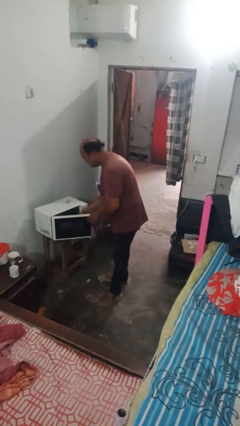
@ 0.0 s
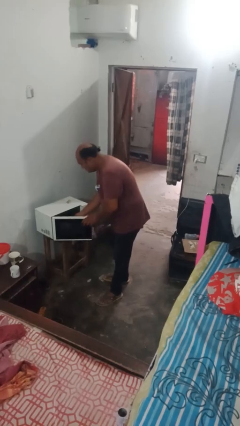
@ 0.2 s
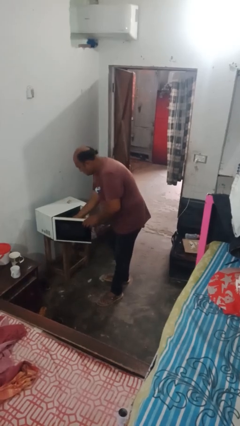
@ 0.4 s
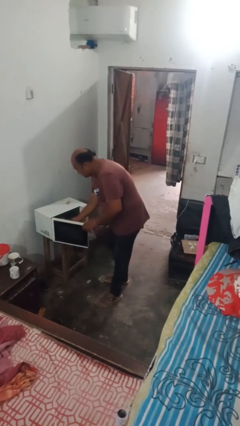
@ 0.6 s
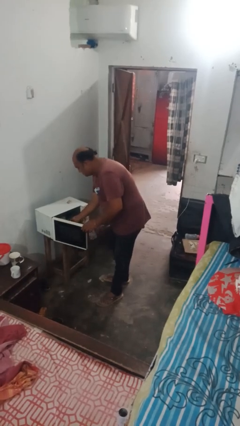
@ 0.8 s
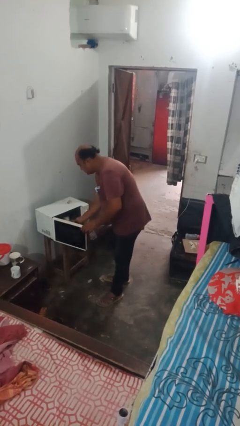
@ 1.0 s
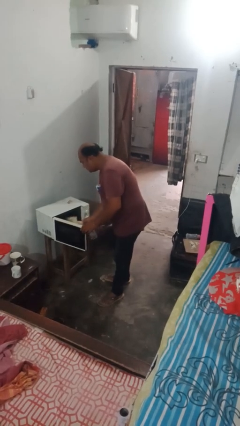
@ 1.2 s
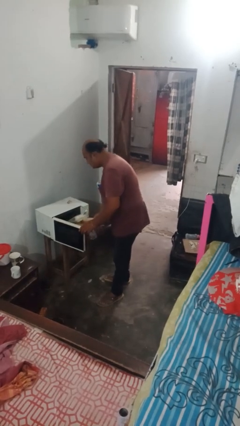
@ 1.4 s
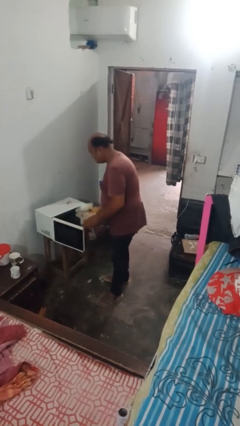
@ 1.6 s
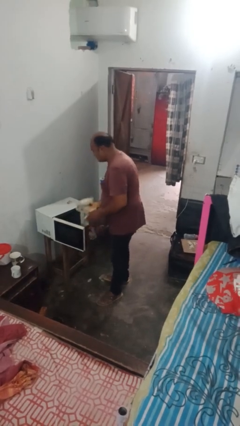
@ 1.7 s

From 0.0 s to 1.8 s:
person takes object from microwave

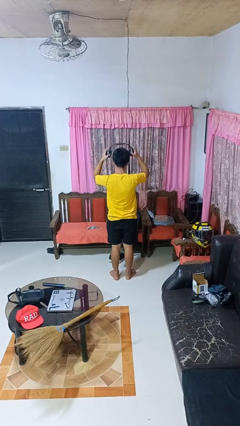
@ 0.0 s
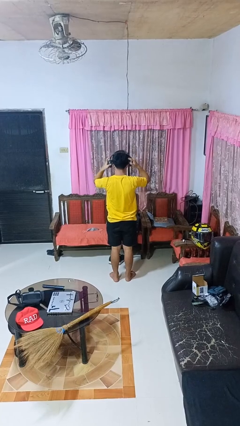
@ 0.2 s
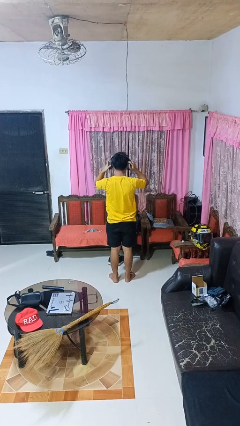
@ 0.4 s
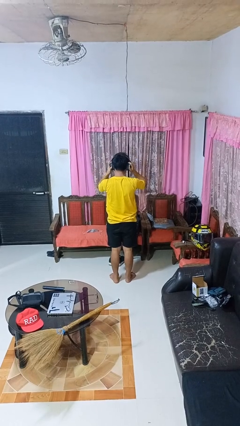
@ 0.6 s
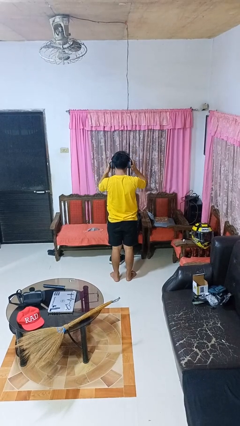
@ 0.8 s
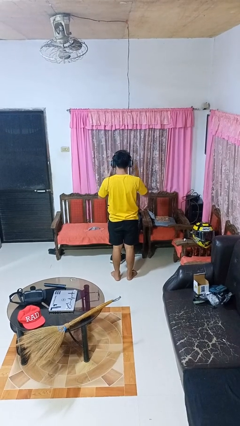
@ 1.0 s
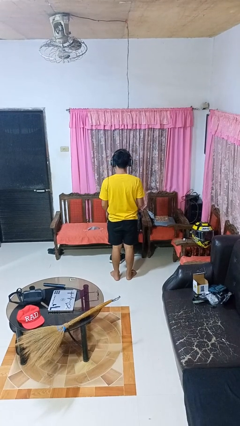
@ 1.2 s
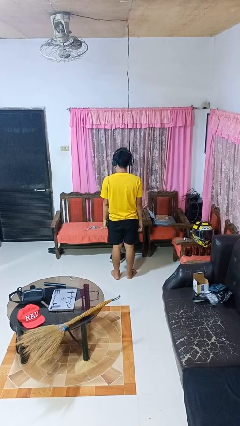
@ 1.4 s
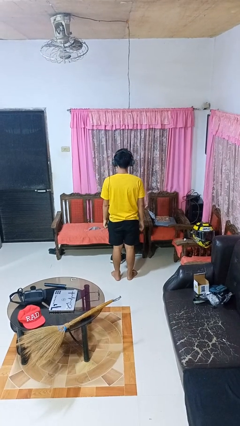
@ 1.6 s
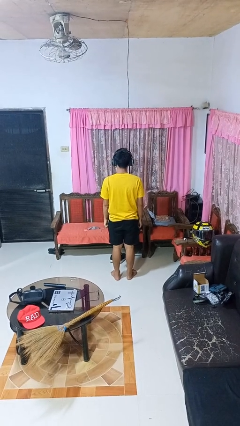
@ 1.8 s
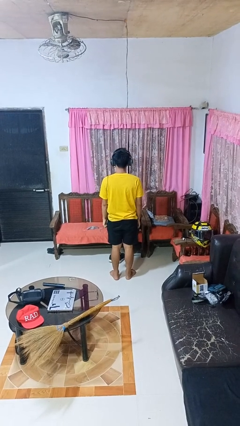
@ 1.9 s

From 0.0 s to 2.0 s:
person puts on headphones

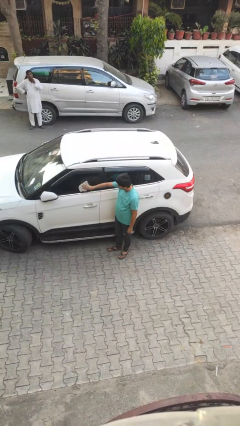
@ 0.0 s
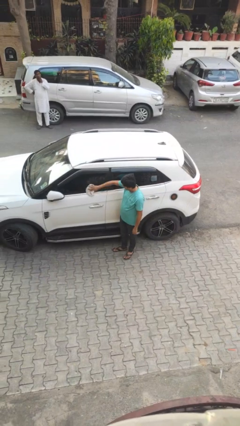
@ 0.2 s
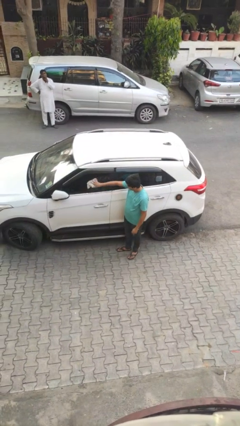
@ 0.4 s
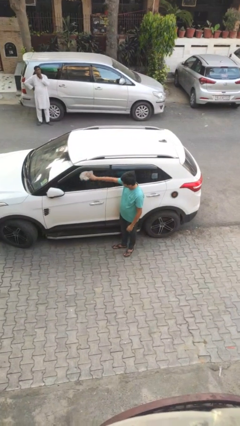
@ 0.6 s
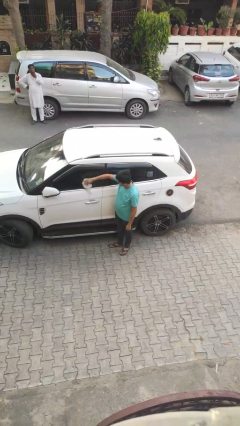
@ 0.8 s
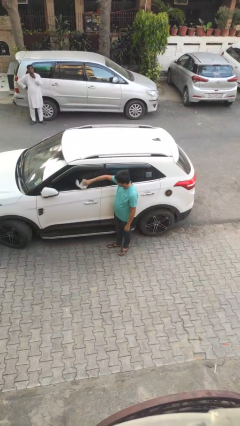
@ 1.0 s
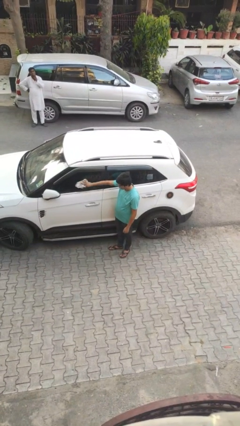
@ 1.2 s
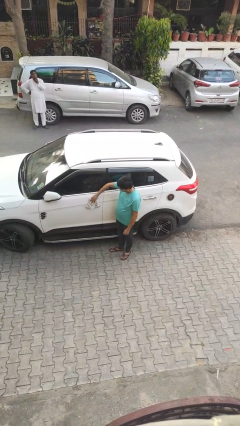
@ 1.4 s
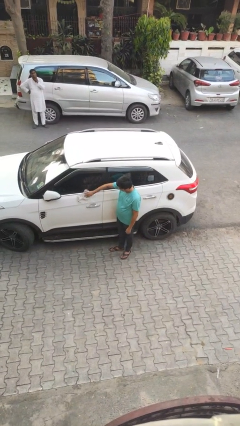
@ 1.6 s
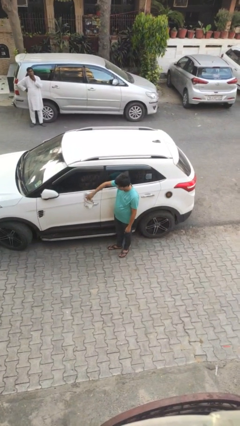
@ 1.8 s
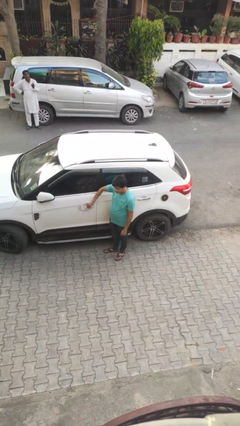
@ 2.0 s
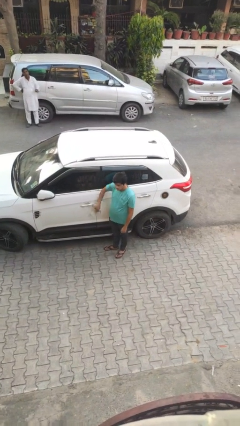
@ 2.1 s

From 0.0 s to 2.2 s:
person polishes car with rag

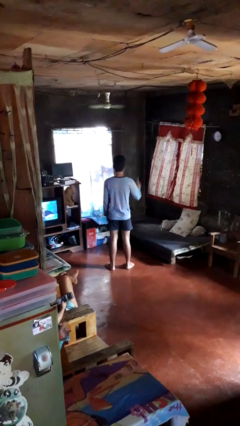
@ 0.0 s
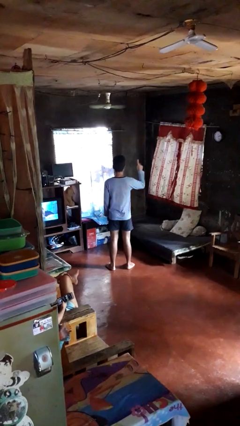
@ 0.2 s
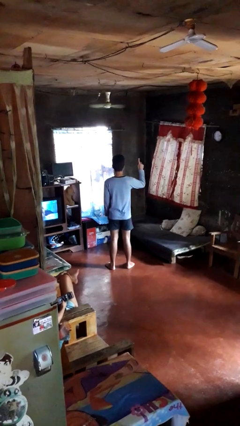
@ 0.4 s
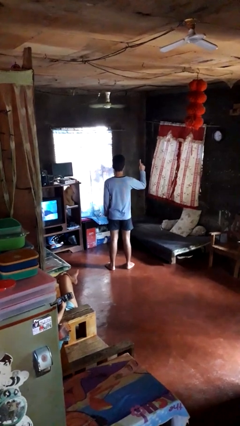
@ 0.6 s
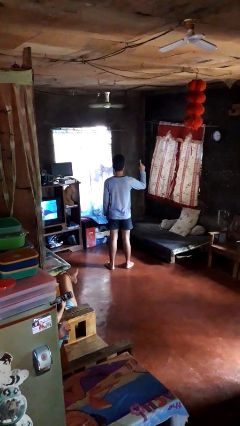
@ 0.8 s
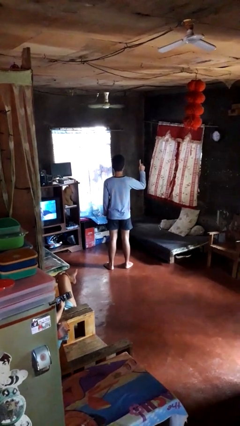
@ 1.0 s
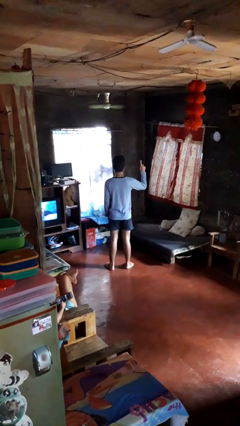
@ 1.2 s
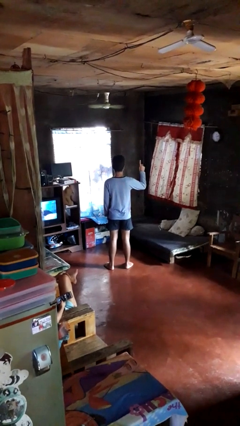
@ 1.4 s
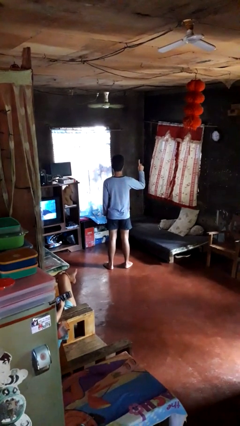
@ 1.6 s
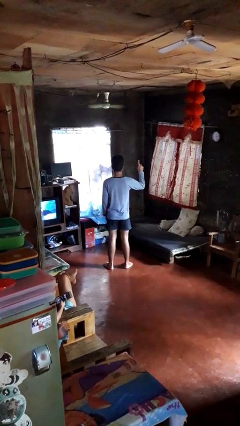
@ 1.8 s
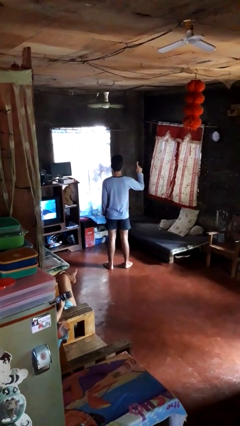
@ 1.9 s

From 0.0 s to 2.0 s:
person gestures number one

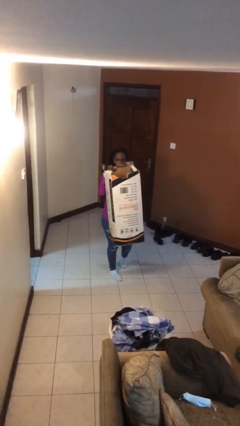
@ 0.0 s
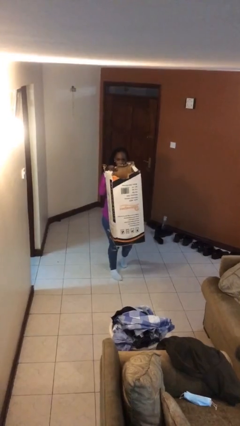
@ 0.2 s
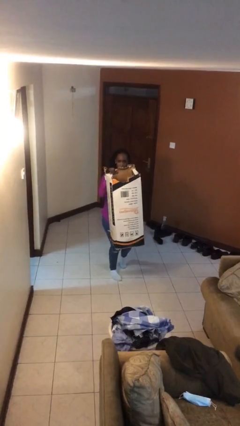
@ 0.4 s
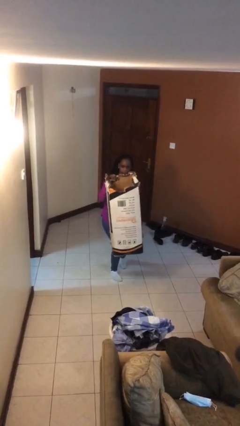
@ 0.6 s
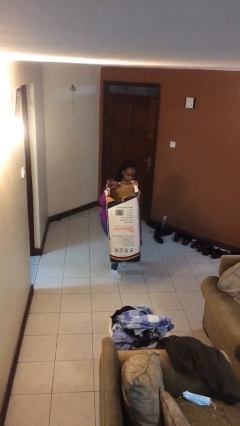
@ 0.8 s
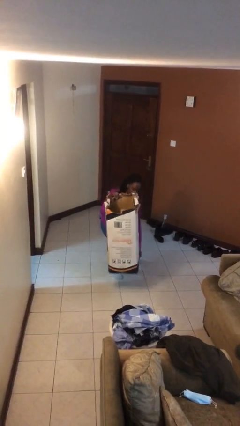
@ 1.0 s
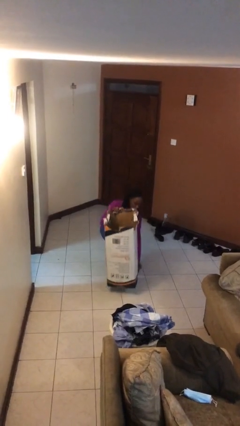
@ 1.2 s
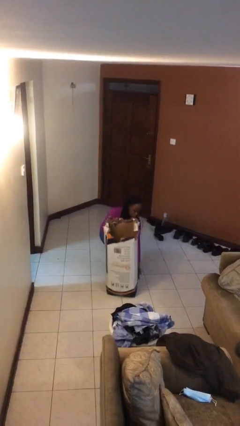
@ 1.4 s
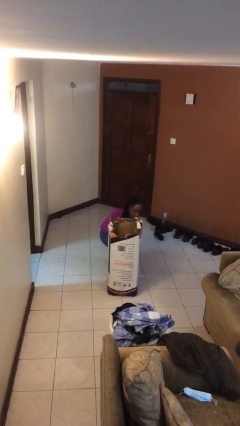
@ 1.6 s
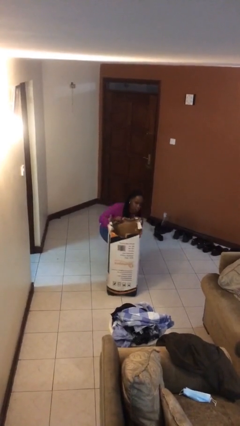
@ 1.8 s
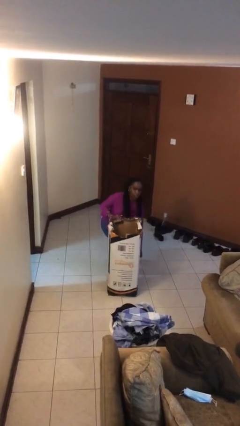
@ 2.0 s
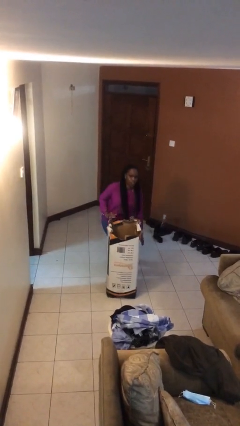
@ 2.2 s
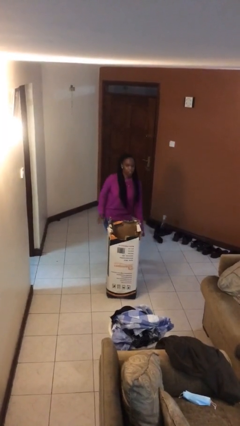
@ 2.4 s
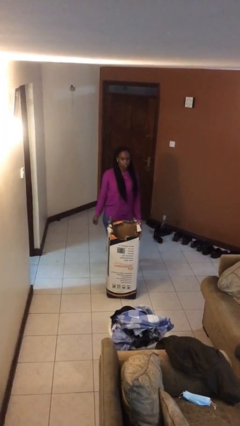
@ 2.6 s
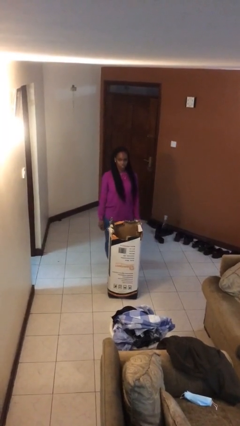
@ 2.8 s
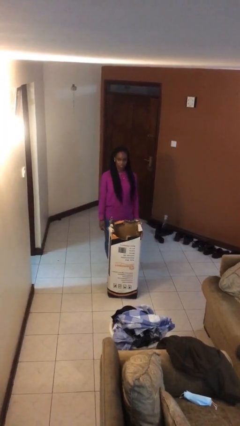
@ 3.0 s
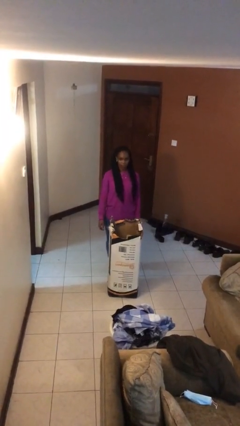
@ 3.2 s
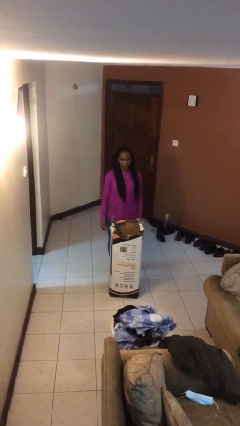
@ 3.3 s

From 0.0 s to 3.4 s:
person puts down object on floor

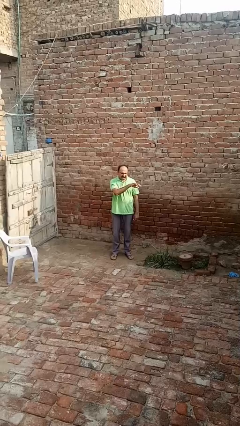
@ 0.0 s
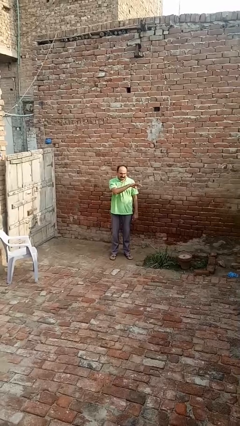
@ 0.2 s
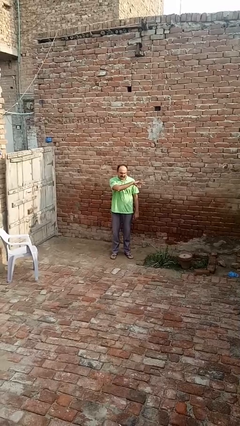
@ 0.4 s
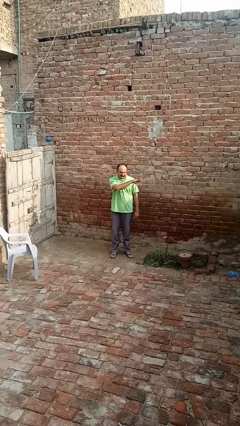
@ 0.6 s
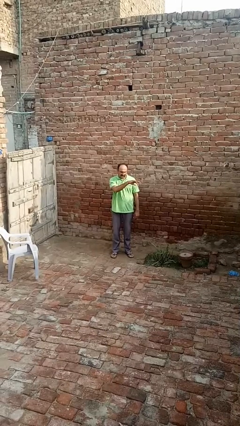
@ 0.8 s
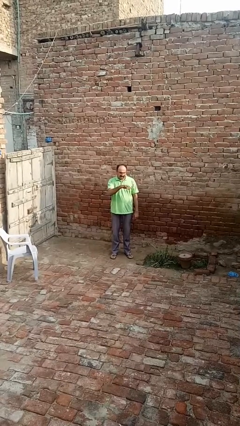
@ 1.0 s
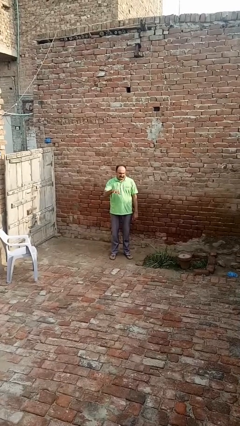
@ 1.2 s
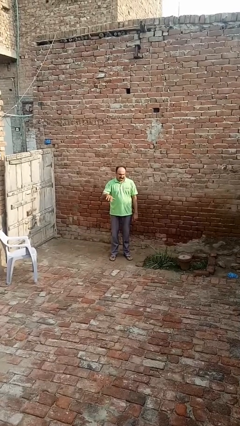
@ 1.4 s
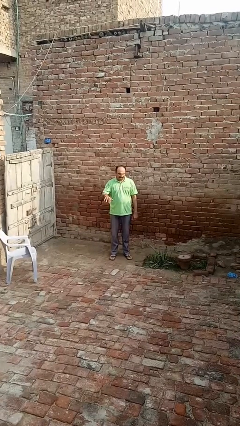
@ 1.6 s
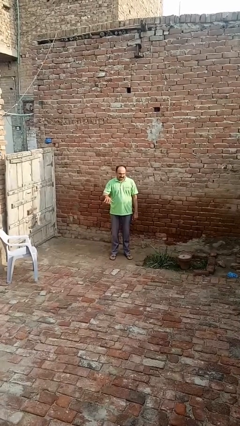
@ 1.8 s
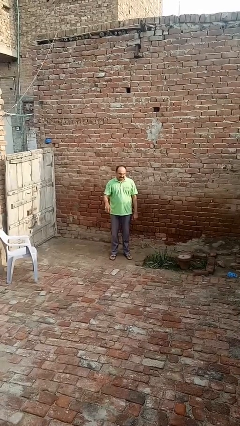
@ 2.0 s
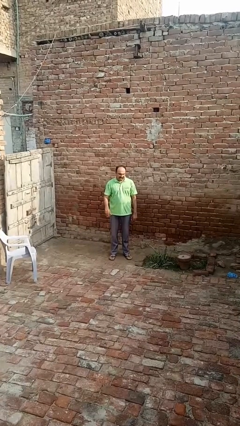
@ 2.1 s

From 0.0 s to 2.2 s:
person gestures swipe right

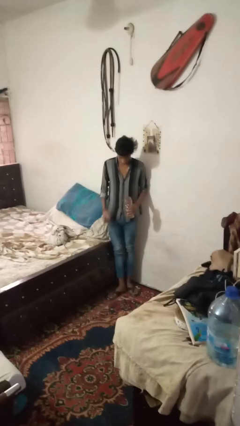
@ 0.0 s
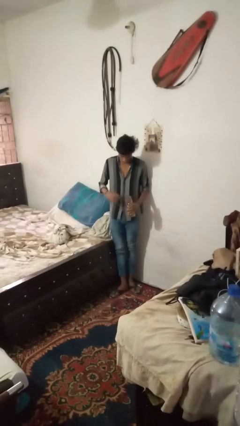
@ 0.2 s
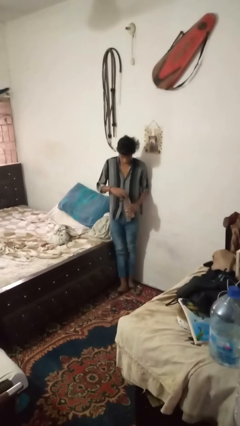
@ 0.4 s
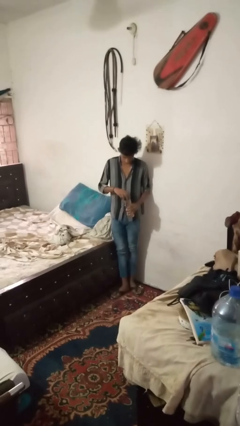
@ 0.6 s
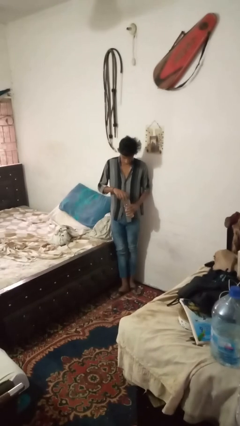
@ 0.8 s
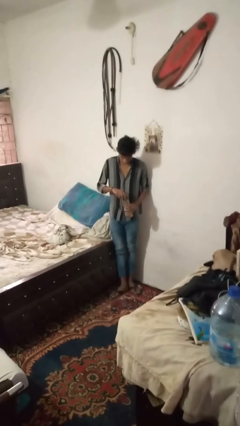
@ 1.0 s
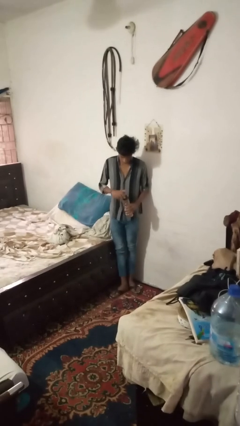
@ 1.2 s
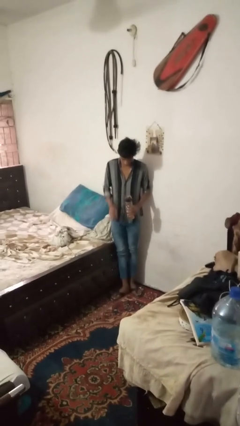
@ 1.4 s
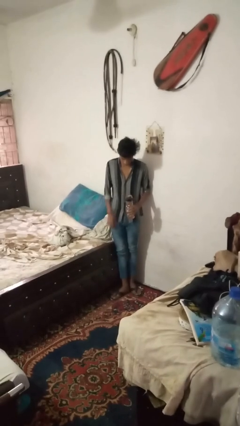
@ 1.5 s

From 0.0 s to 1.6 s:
person screws lid to bottle

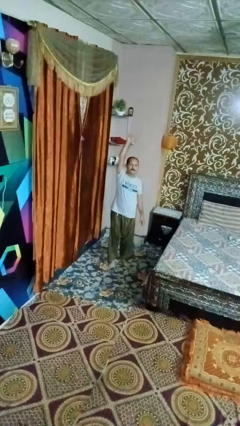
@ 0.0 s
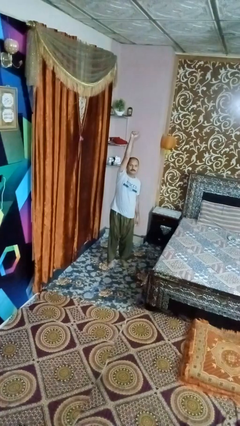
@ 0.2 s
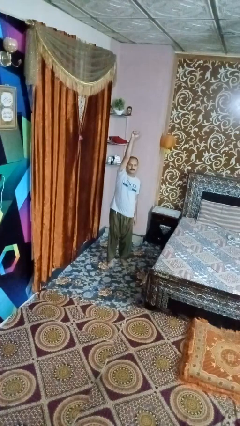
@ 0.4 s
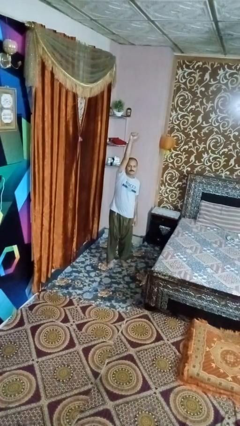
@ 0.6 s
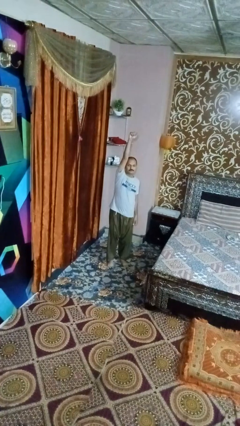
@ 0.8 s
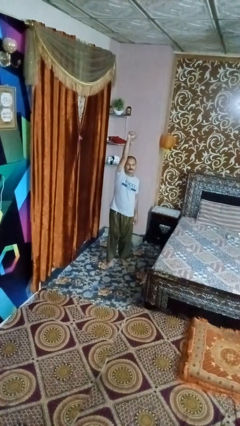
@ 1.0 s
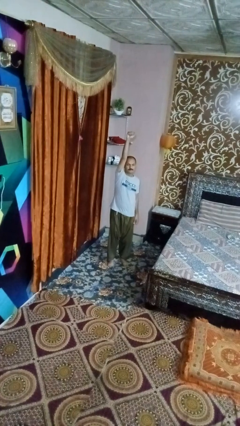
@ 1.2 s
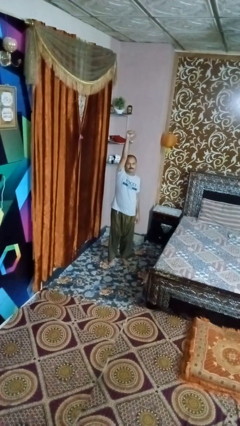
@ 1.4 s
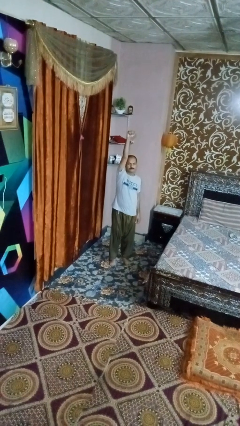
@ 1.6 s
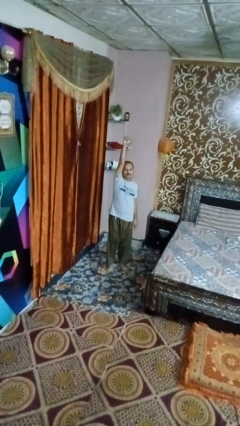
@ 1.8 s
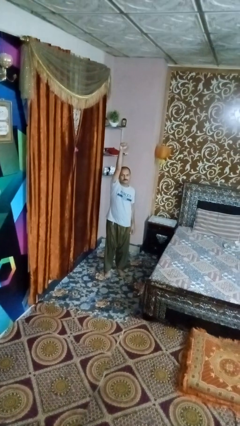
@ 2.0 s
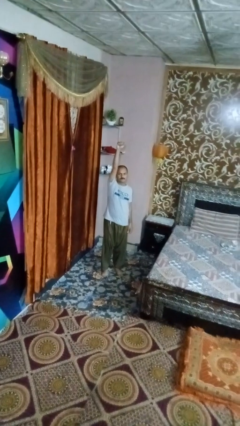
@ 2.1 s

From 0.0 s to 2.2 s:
person punches
